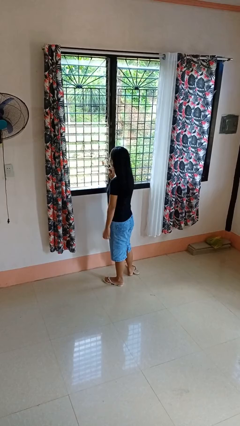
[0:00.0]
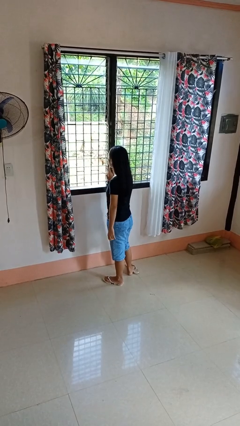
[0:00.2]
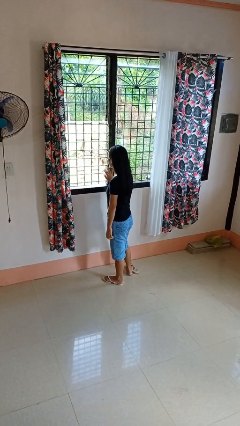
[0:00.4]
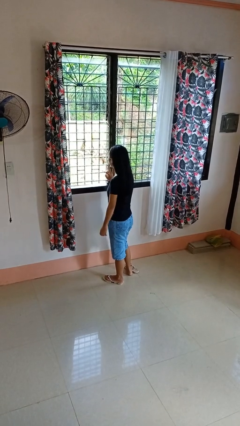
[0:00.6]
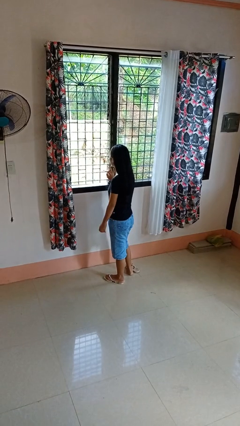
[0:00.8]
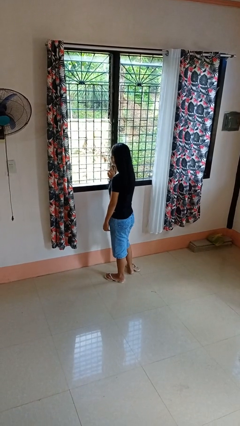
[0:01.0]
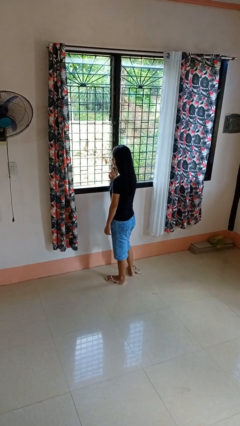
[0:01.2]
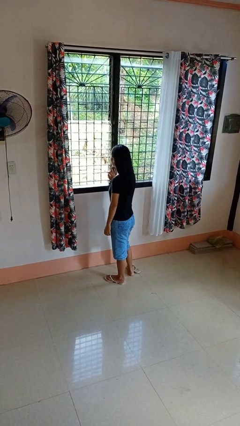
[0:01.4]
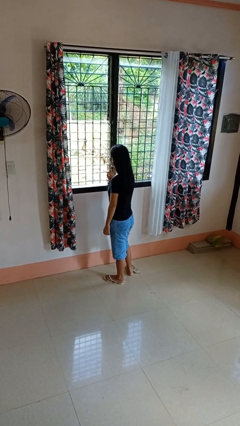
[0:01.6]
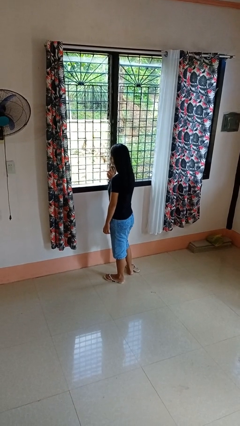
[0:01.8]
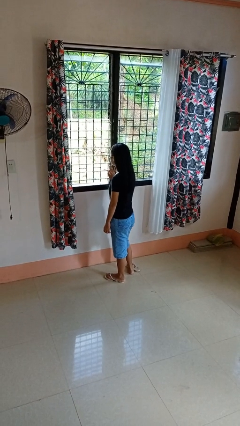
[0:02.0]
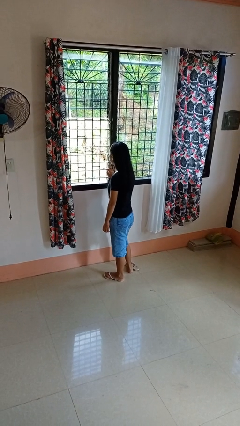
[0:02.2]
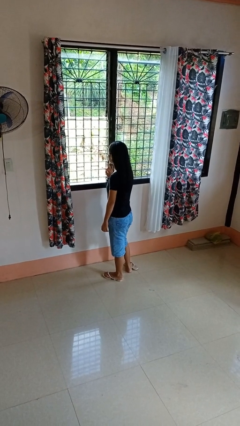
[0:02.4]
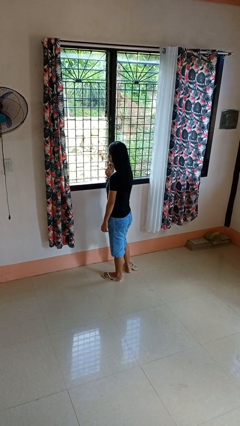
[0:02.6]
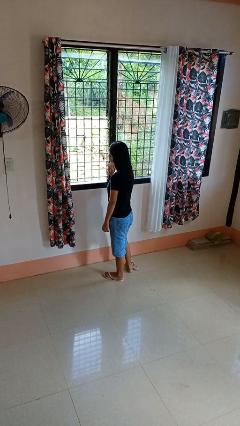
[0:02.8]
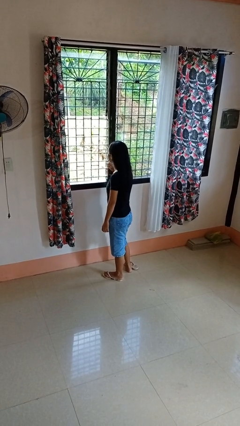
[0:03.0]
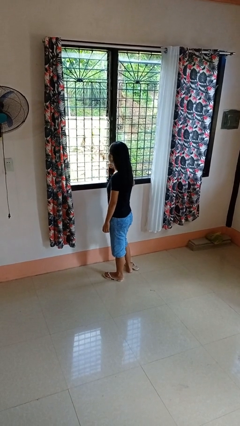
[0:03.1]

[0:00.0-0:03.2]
person opens home window

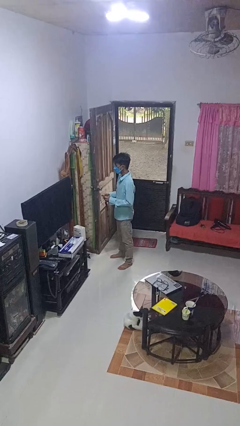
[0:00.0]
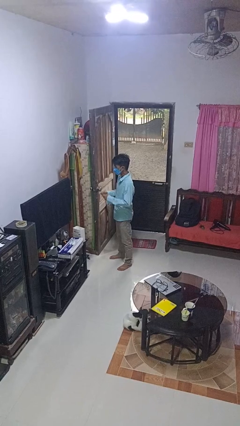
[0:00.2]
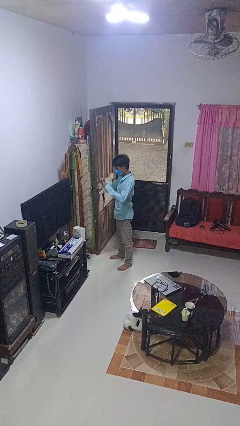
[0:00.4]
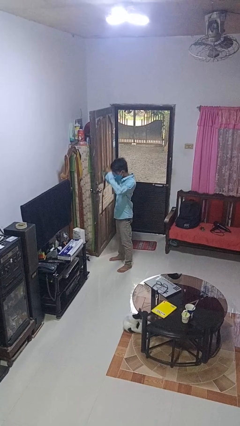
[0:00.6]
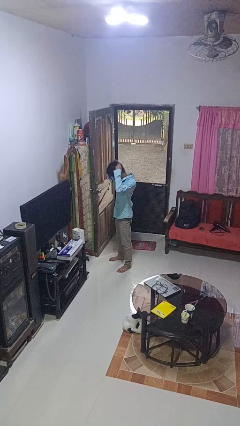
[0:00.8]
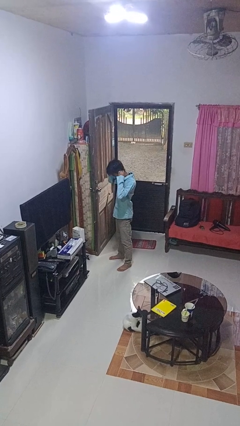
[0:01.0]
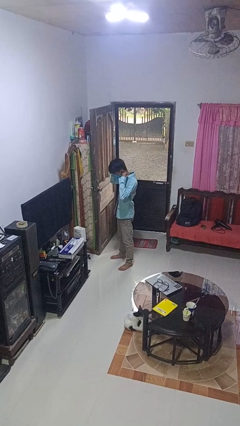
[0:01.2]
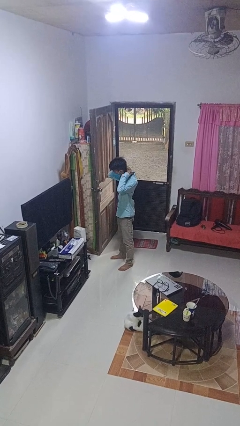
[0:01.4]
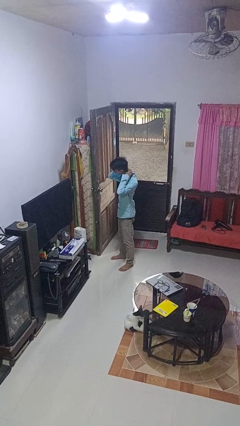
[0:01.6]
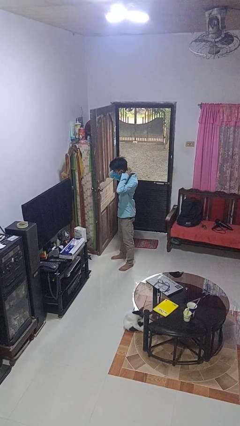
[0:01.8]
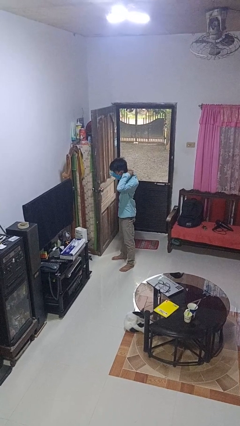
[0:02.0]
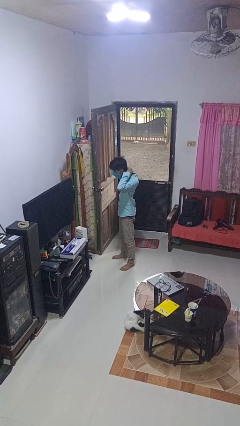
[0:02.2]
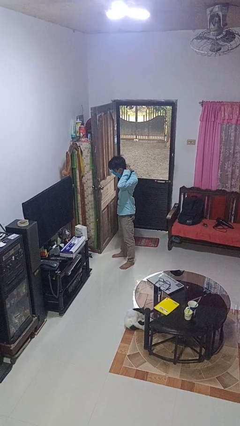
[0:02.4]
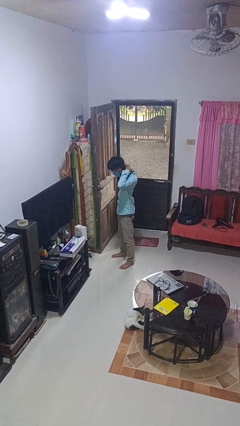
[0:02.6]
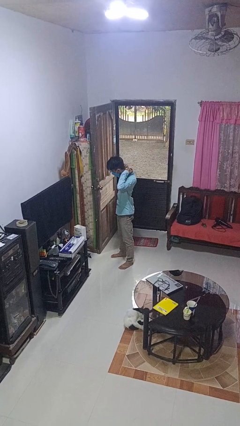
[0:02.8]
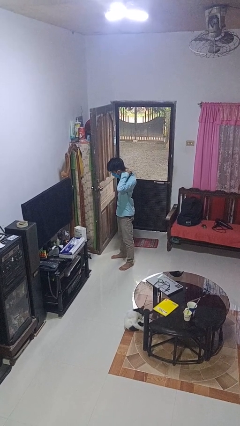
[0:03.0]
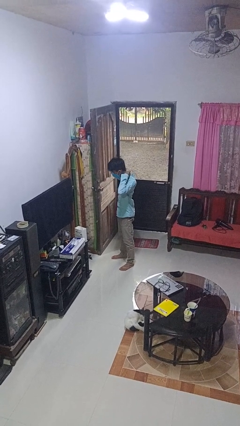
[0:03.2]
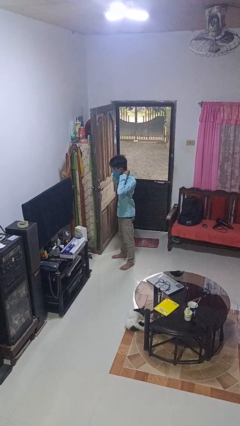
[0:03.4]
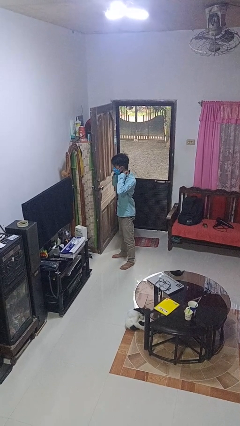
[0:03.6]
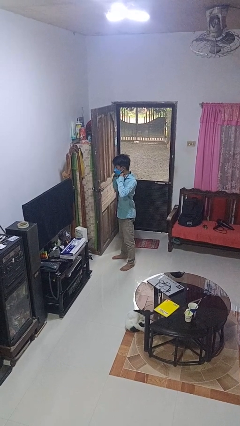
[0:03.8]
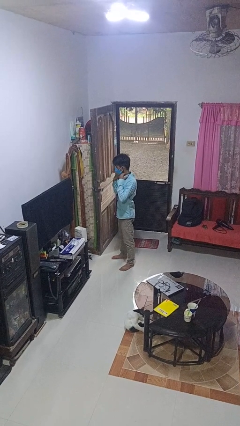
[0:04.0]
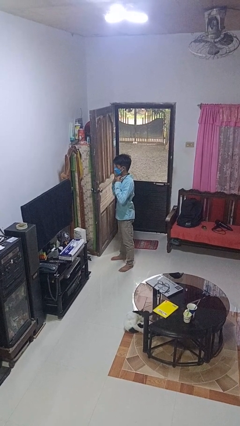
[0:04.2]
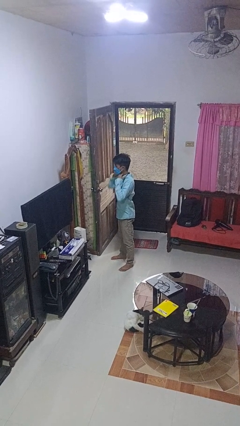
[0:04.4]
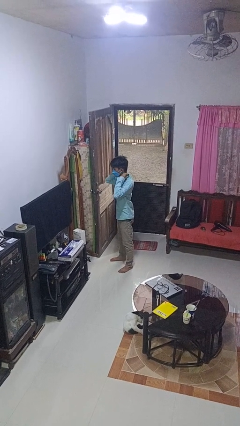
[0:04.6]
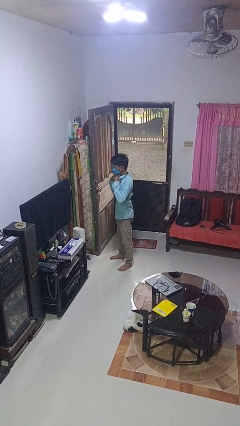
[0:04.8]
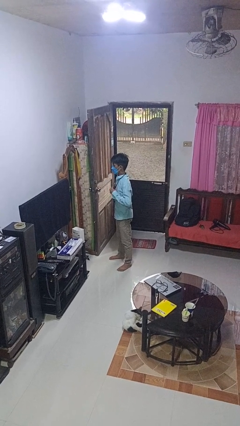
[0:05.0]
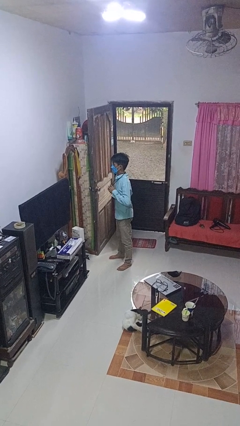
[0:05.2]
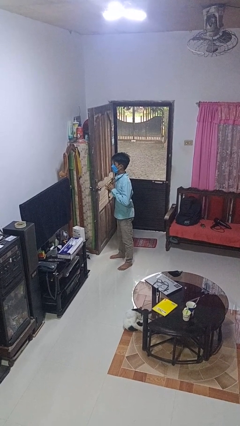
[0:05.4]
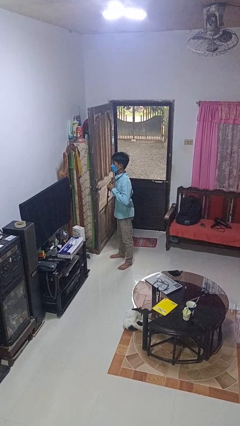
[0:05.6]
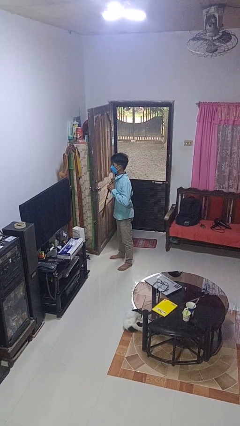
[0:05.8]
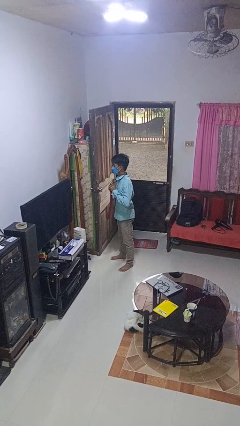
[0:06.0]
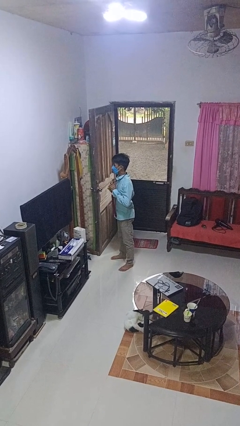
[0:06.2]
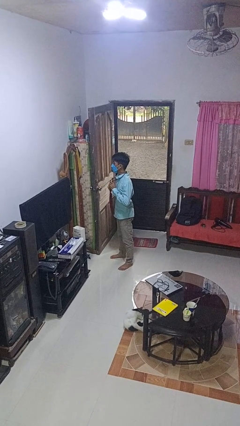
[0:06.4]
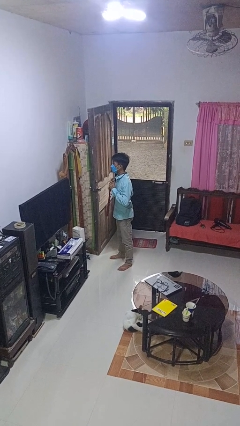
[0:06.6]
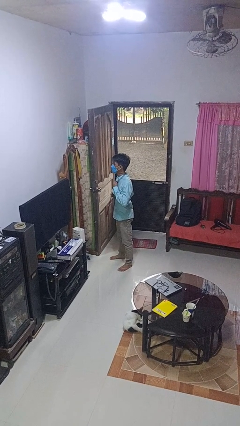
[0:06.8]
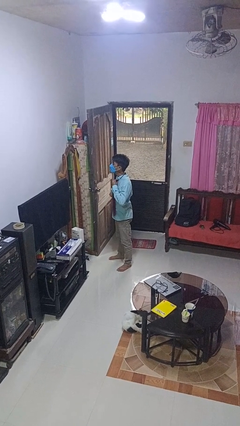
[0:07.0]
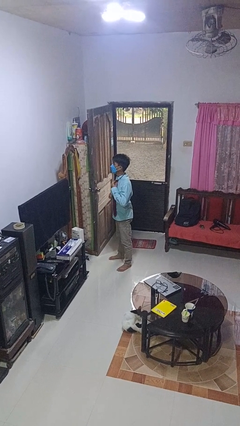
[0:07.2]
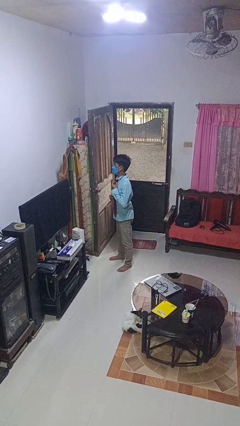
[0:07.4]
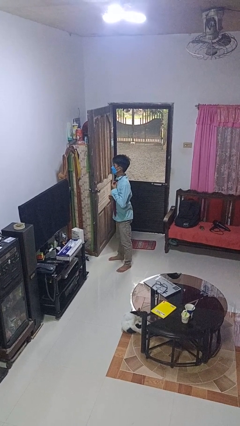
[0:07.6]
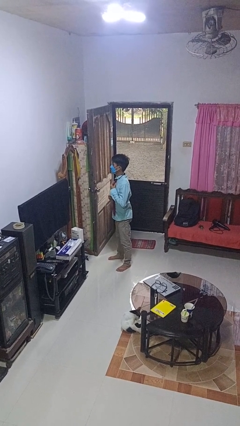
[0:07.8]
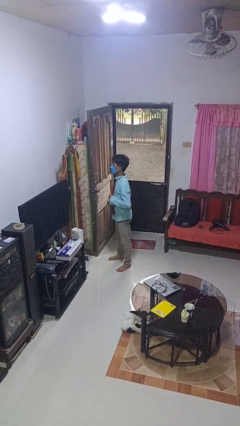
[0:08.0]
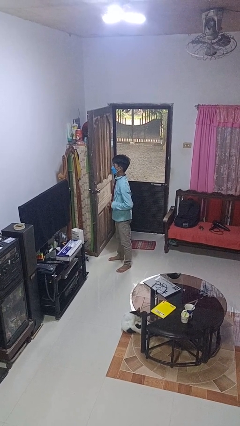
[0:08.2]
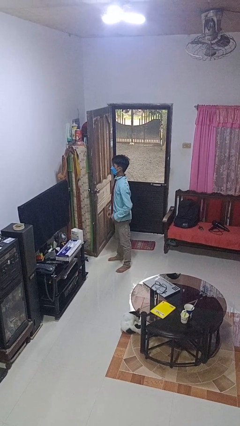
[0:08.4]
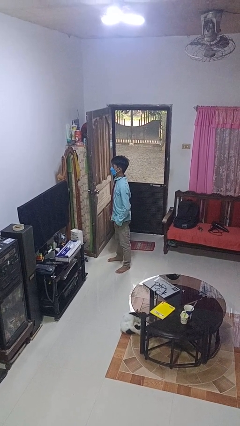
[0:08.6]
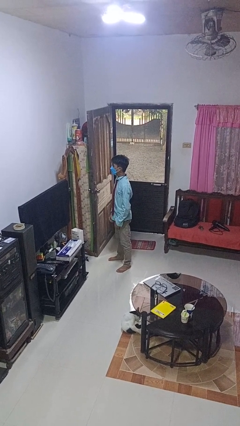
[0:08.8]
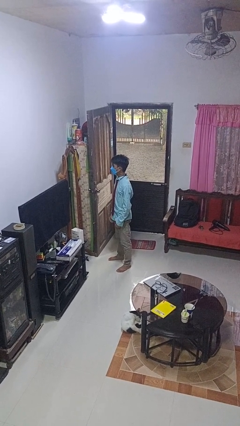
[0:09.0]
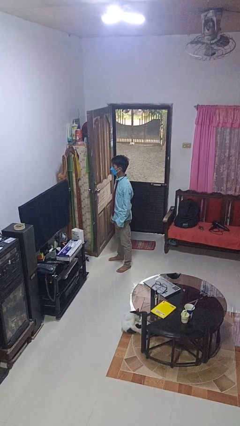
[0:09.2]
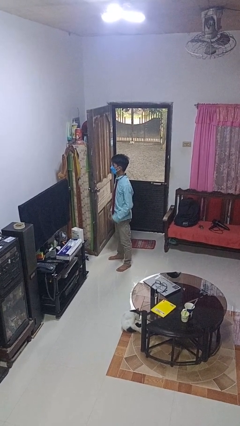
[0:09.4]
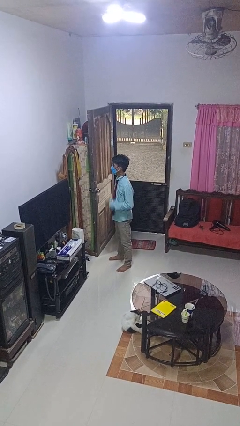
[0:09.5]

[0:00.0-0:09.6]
person puts on necktie

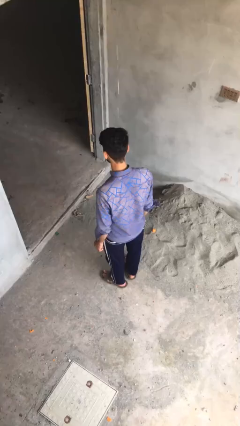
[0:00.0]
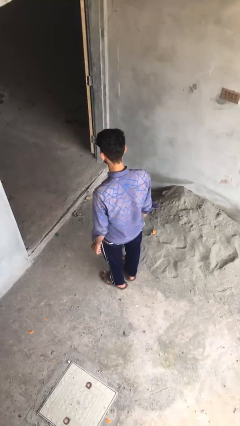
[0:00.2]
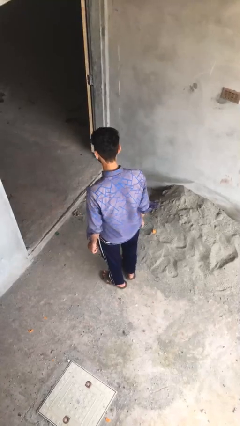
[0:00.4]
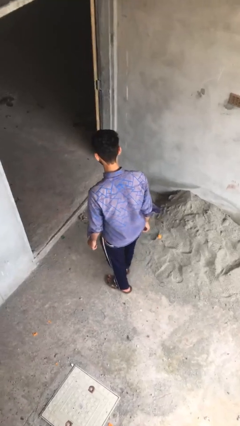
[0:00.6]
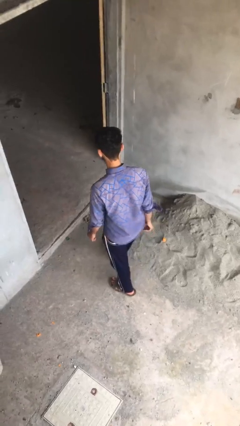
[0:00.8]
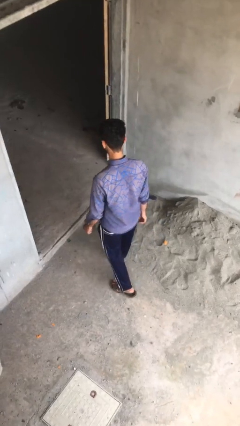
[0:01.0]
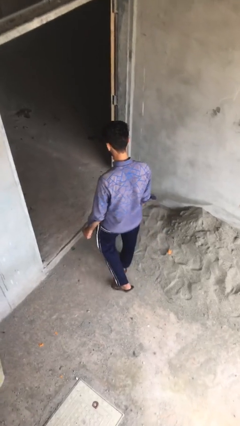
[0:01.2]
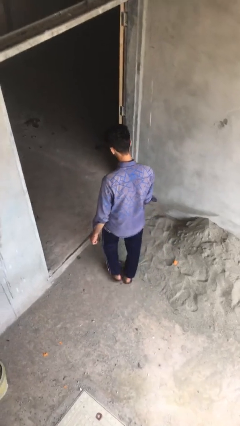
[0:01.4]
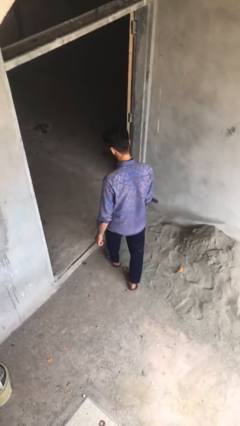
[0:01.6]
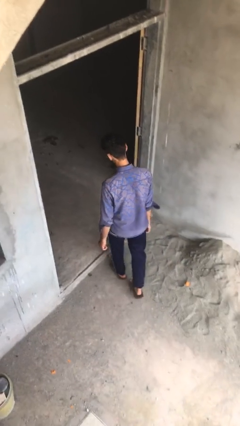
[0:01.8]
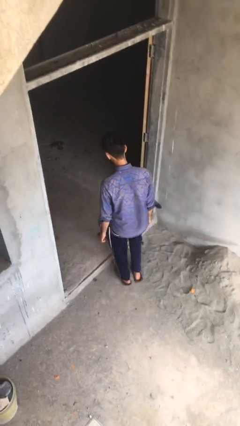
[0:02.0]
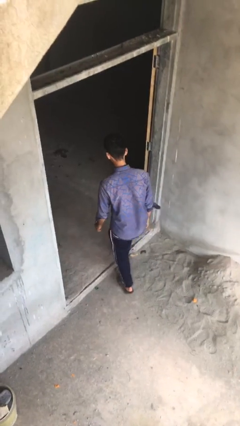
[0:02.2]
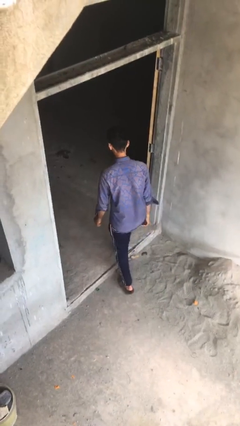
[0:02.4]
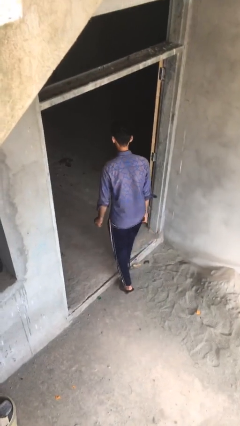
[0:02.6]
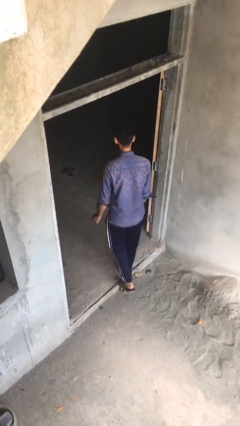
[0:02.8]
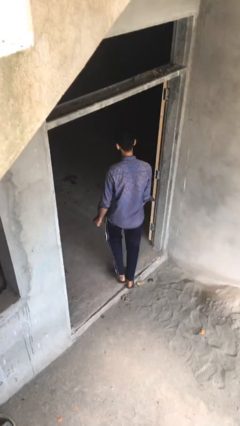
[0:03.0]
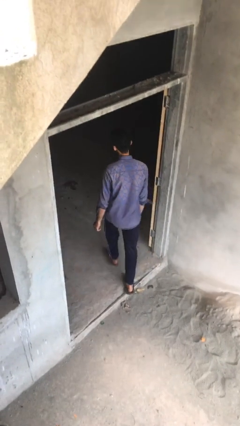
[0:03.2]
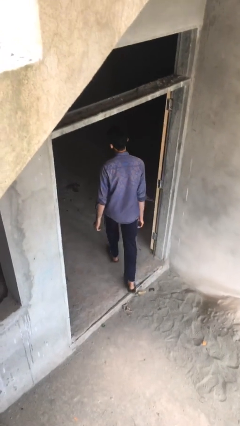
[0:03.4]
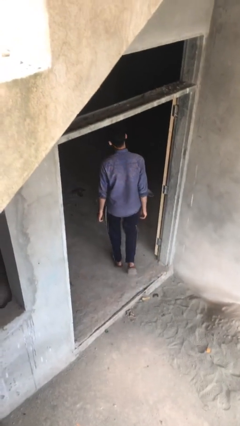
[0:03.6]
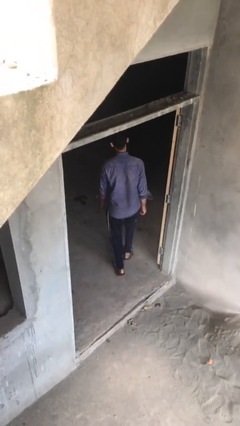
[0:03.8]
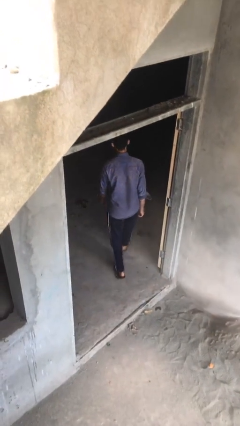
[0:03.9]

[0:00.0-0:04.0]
person exits scene through structure

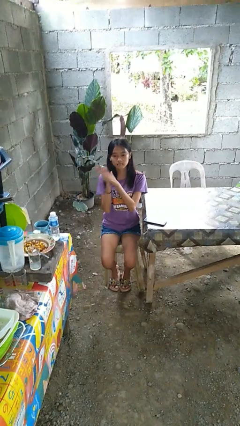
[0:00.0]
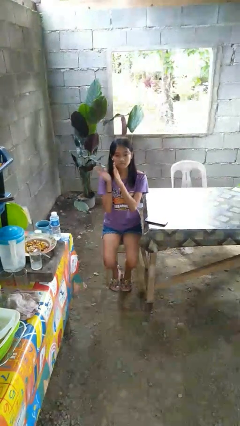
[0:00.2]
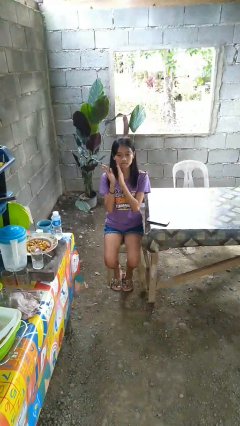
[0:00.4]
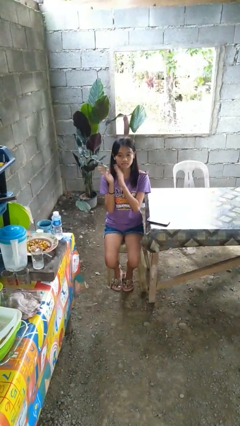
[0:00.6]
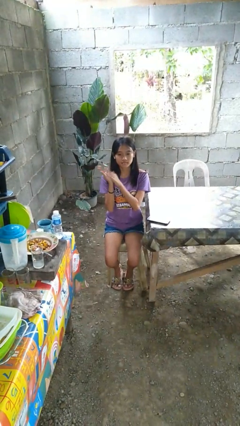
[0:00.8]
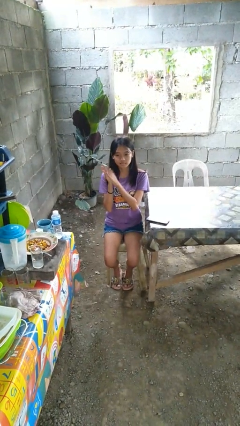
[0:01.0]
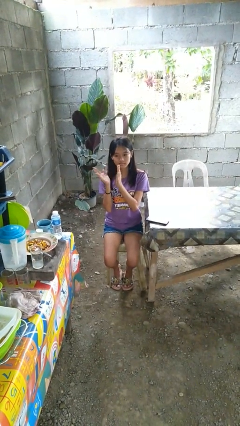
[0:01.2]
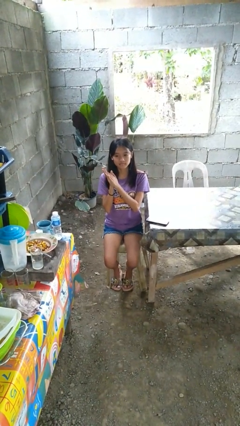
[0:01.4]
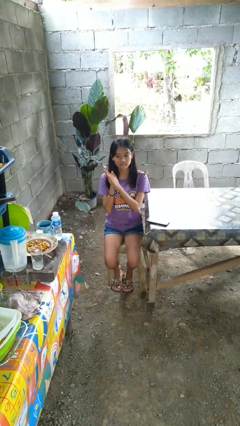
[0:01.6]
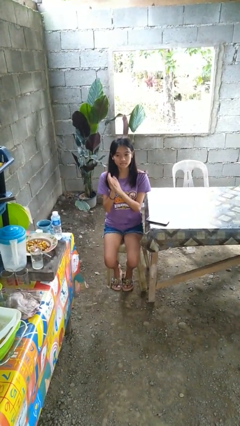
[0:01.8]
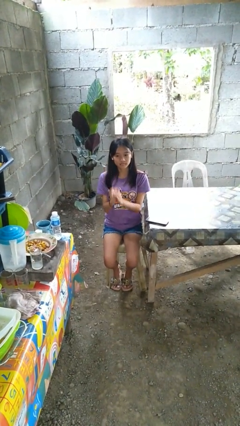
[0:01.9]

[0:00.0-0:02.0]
person claps hands
